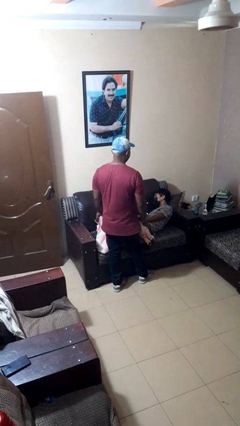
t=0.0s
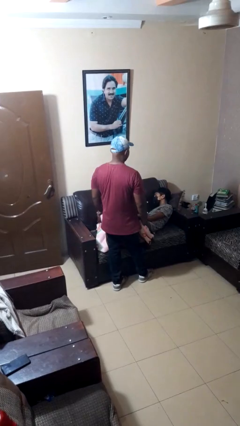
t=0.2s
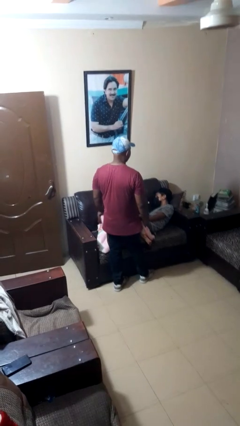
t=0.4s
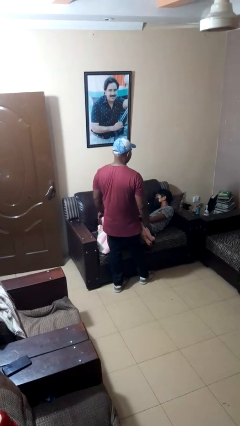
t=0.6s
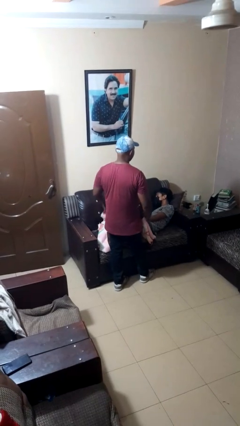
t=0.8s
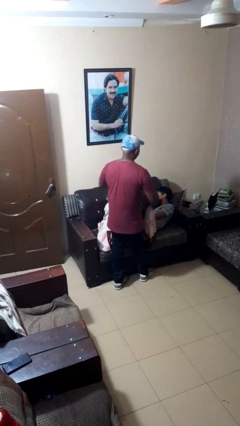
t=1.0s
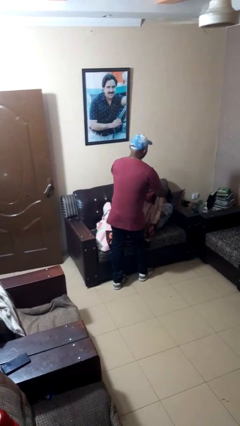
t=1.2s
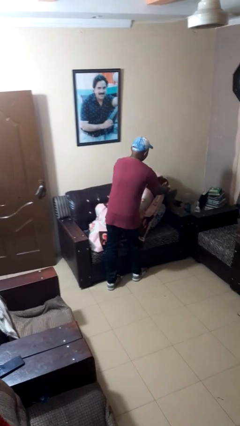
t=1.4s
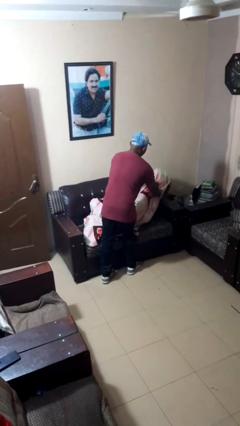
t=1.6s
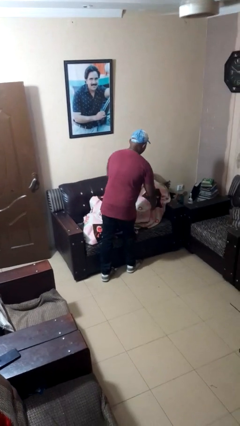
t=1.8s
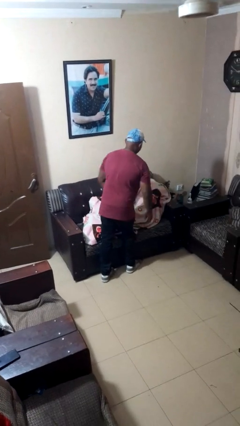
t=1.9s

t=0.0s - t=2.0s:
person covers friend with blanket

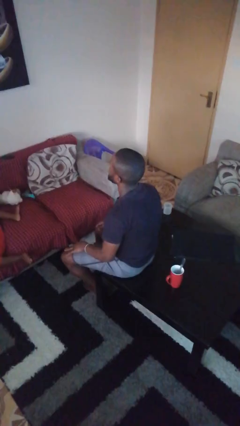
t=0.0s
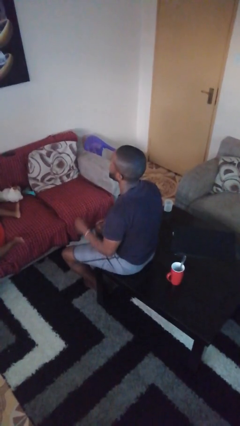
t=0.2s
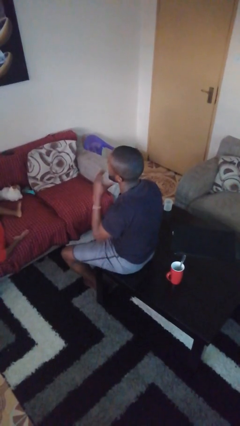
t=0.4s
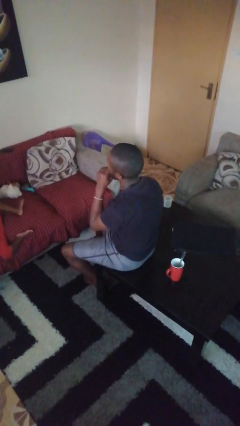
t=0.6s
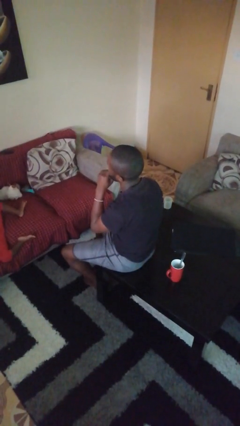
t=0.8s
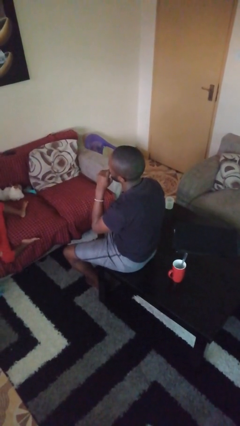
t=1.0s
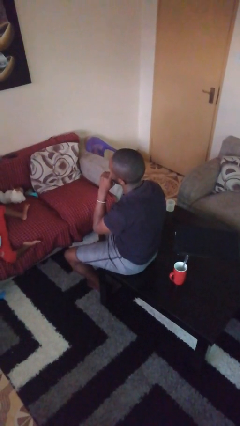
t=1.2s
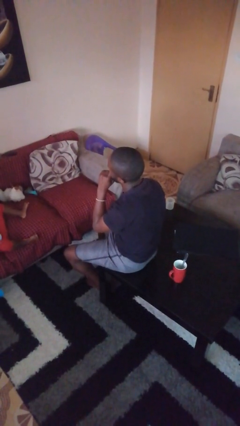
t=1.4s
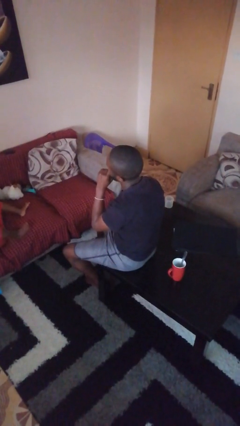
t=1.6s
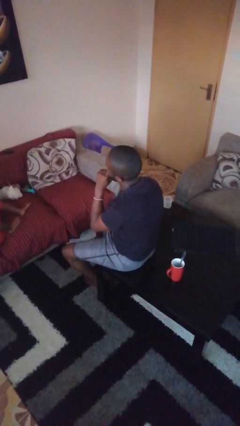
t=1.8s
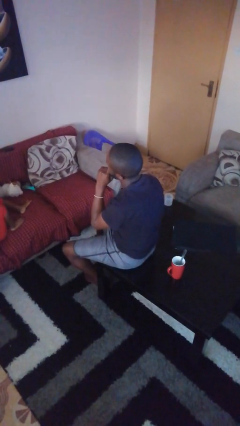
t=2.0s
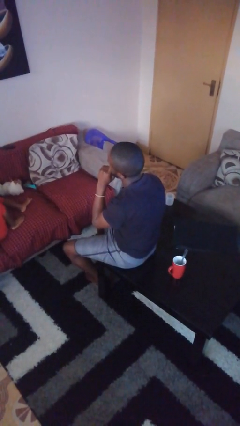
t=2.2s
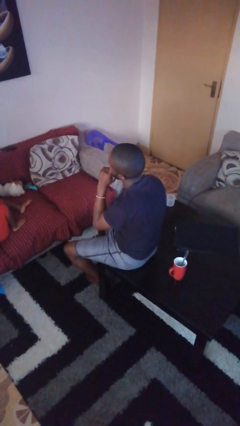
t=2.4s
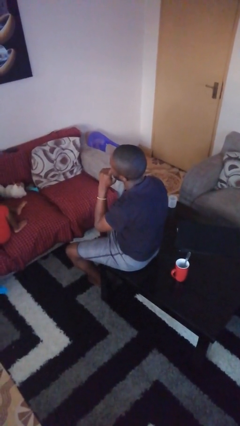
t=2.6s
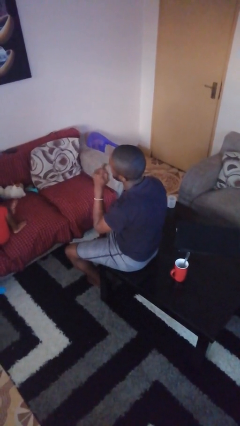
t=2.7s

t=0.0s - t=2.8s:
person strokes chin

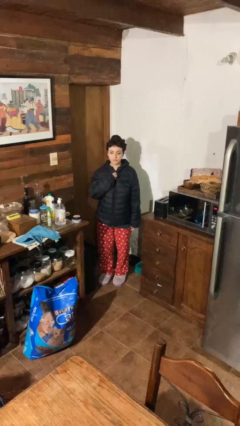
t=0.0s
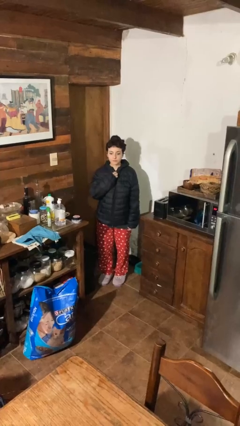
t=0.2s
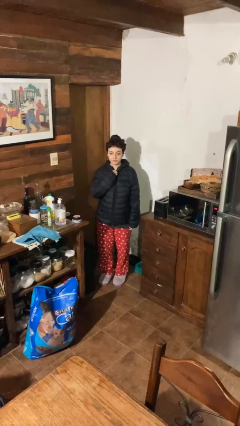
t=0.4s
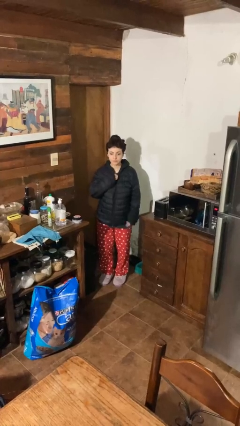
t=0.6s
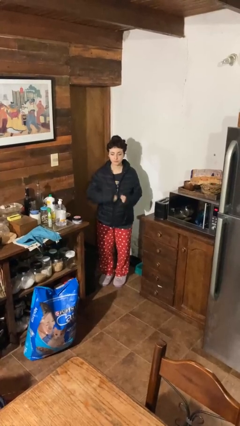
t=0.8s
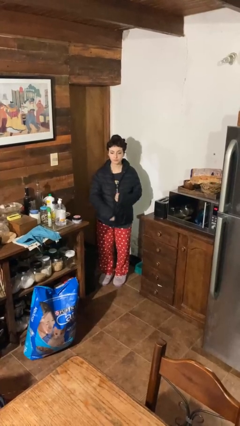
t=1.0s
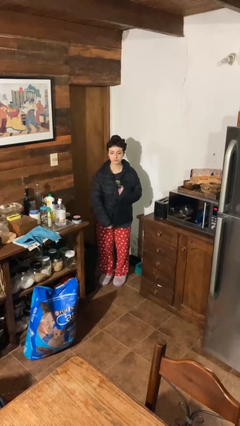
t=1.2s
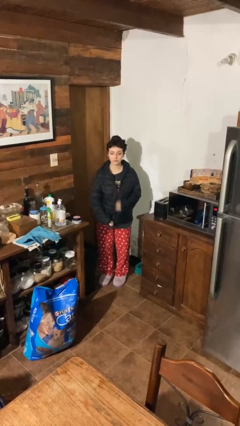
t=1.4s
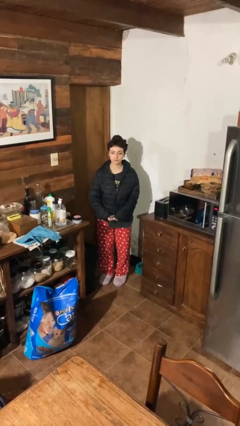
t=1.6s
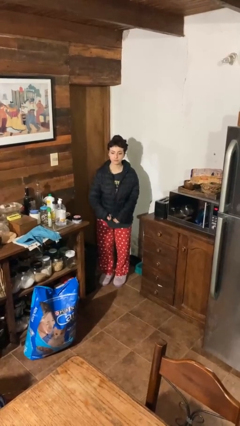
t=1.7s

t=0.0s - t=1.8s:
person unzips jacket

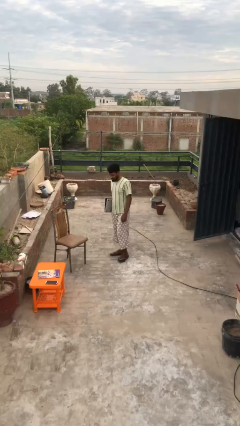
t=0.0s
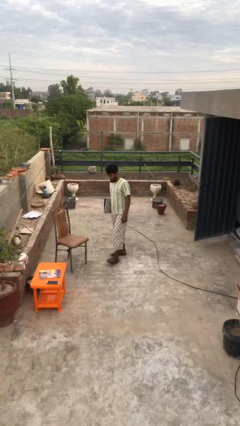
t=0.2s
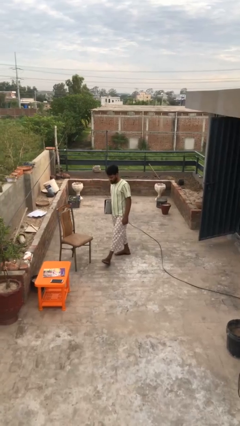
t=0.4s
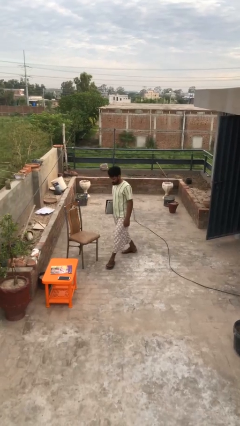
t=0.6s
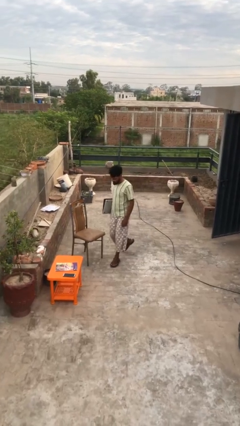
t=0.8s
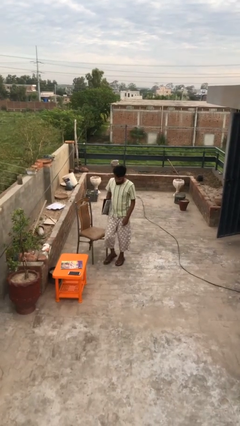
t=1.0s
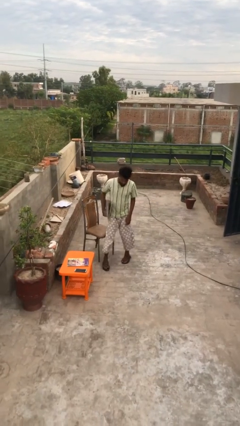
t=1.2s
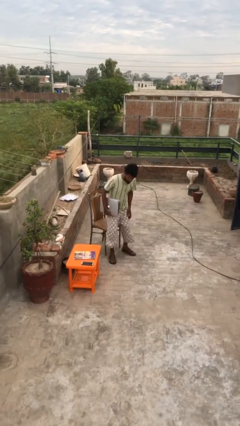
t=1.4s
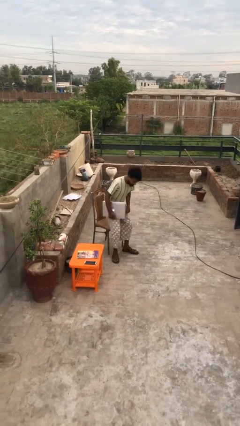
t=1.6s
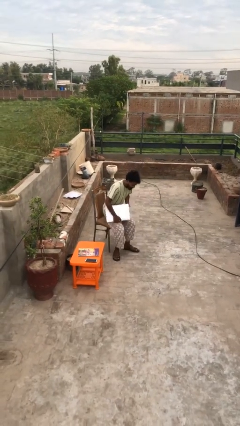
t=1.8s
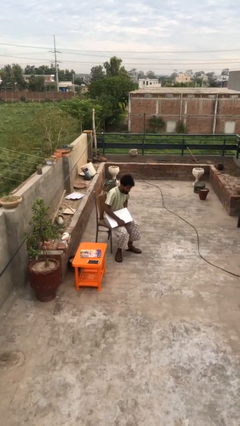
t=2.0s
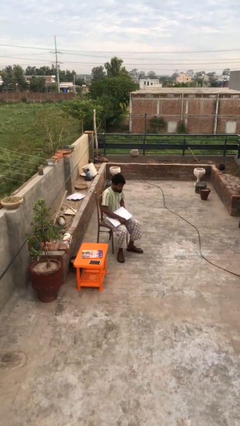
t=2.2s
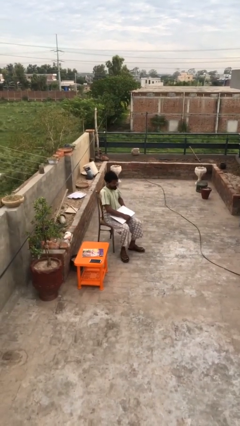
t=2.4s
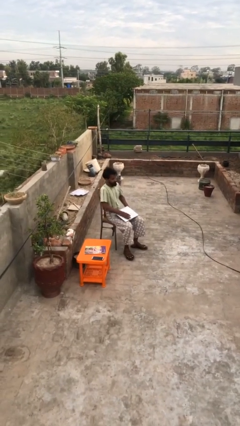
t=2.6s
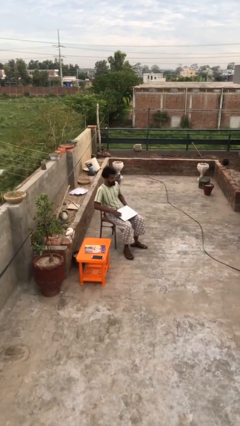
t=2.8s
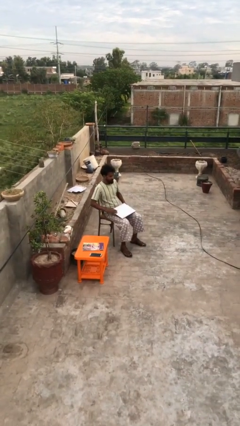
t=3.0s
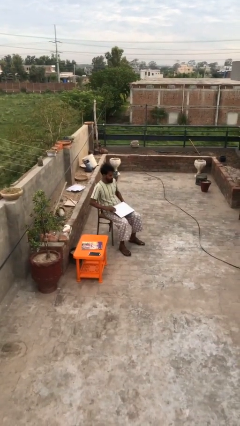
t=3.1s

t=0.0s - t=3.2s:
person sits down

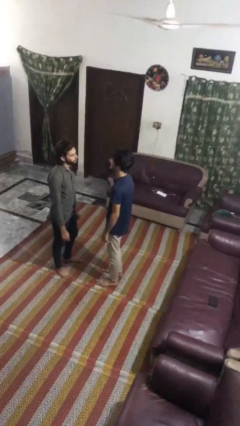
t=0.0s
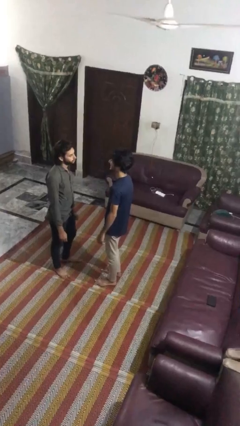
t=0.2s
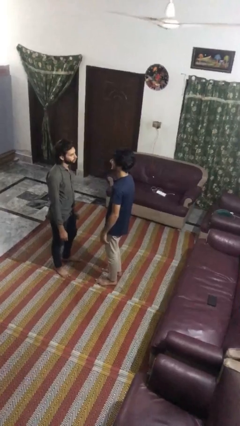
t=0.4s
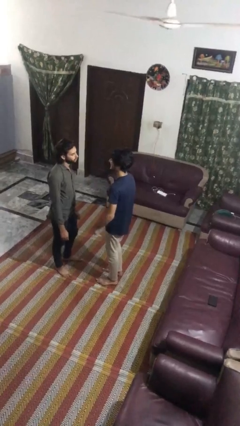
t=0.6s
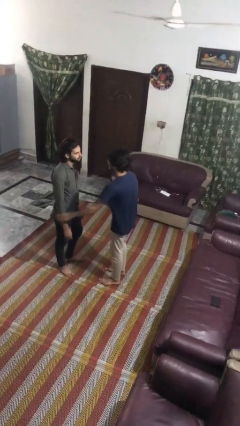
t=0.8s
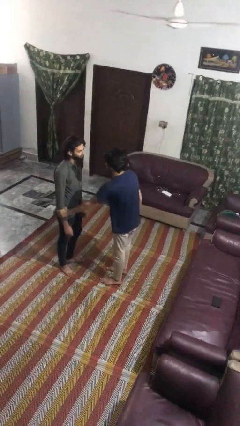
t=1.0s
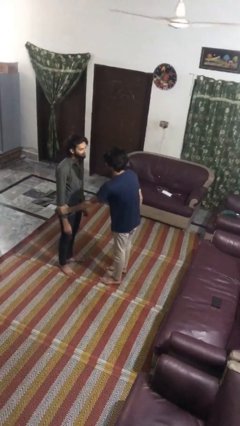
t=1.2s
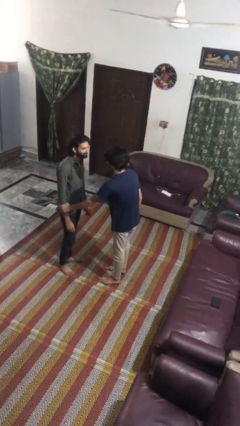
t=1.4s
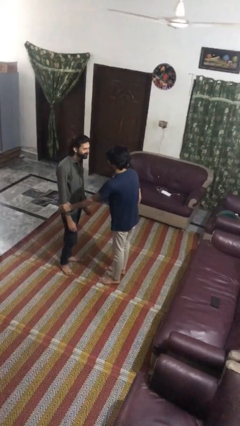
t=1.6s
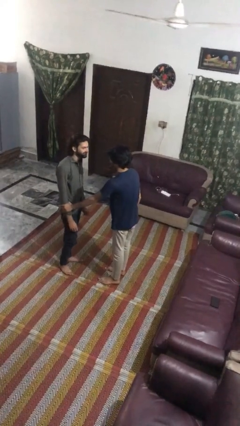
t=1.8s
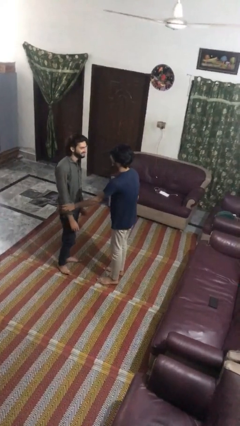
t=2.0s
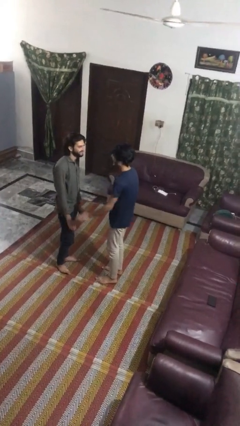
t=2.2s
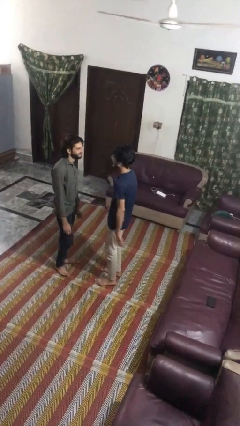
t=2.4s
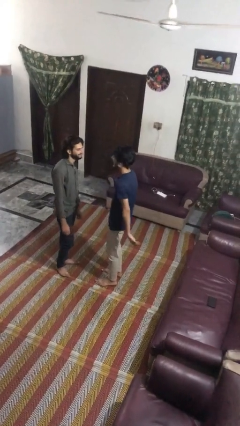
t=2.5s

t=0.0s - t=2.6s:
person grabs person by forearm

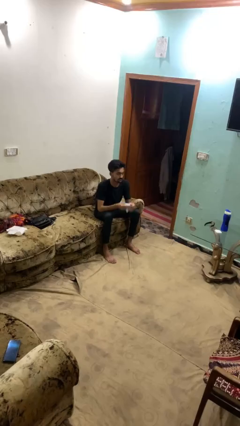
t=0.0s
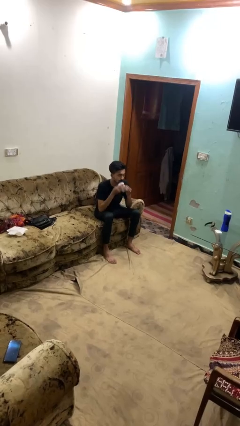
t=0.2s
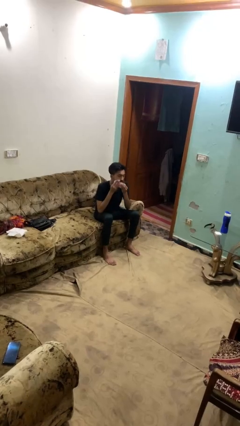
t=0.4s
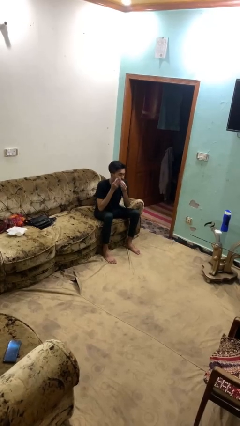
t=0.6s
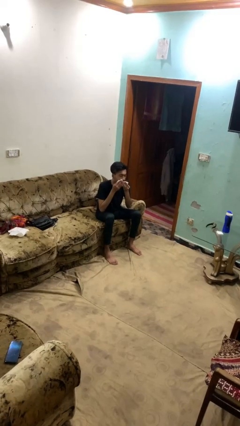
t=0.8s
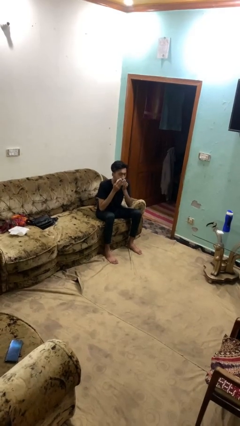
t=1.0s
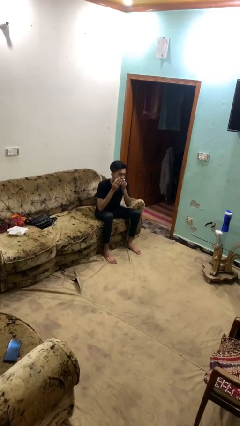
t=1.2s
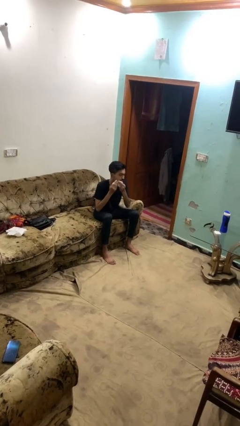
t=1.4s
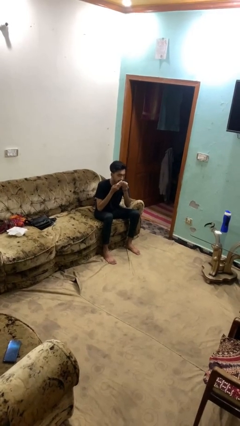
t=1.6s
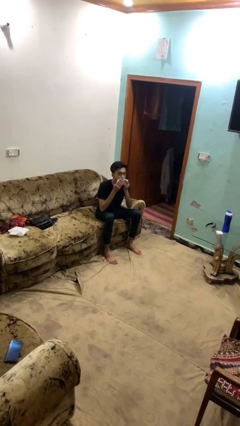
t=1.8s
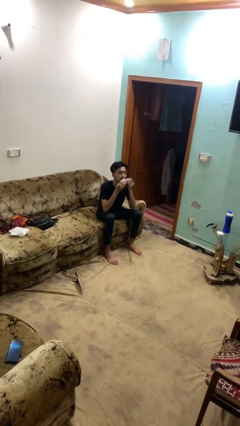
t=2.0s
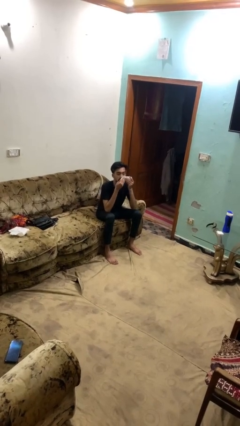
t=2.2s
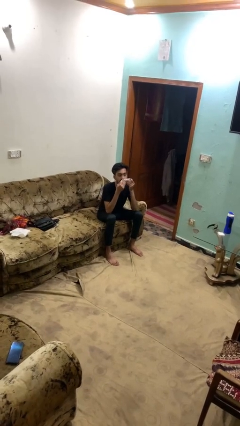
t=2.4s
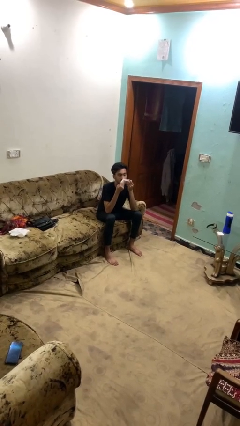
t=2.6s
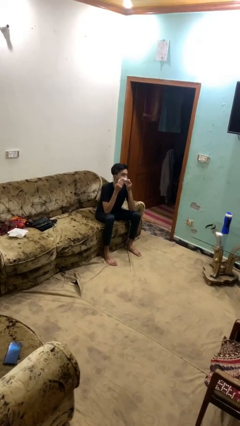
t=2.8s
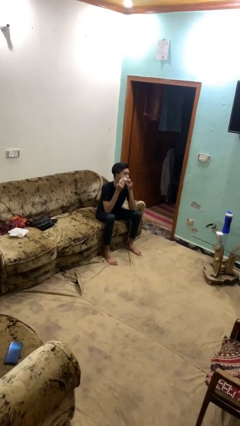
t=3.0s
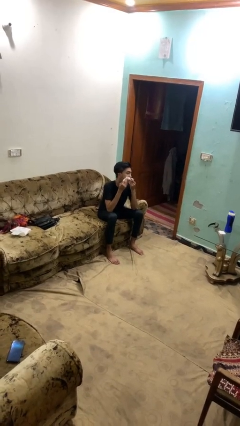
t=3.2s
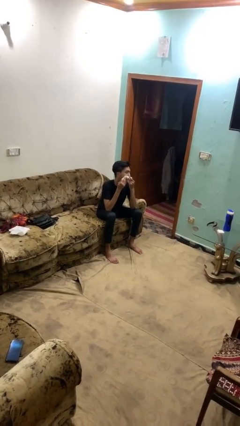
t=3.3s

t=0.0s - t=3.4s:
person wipes mouth with napkin

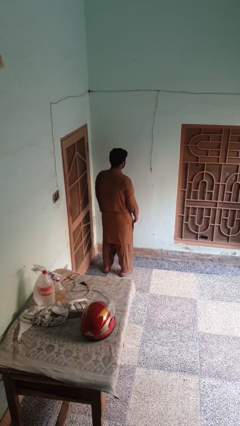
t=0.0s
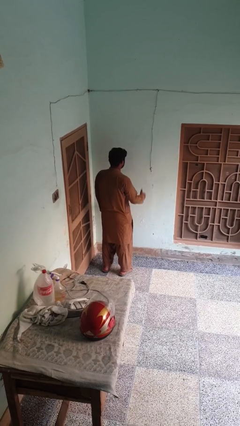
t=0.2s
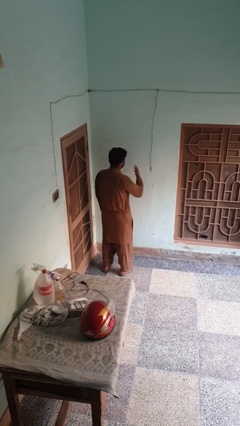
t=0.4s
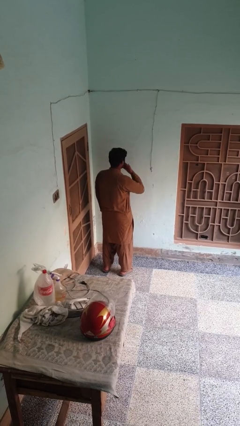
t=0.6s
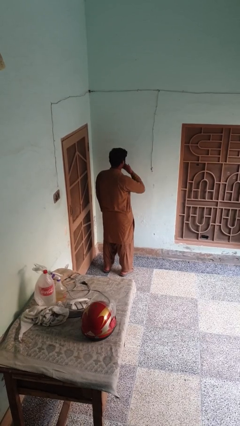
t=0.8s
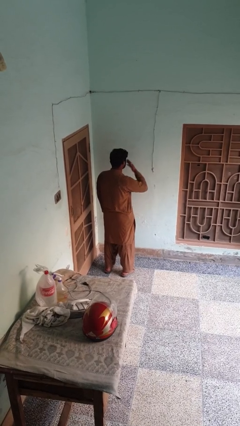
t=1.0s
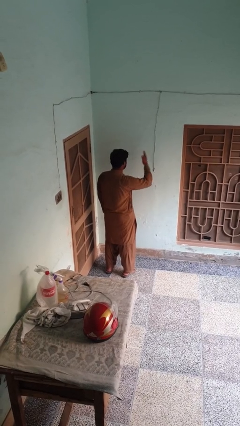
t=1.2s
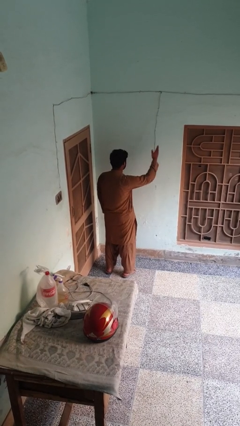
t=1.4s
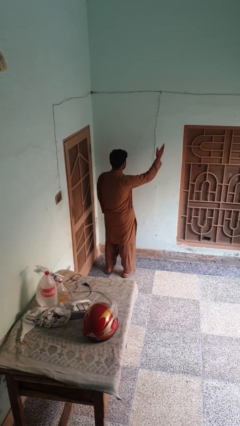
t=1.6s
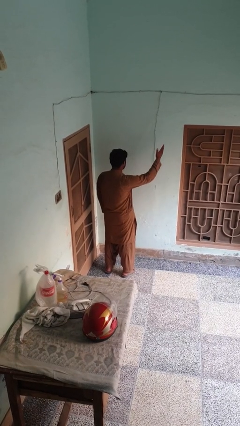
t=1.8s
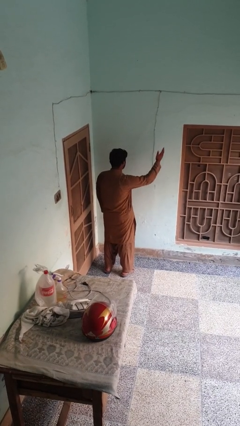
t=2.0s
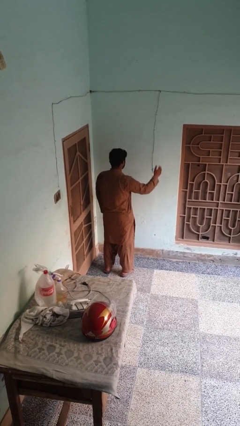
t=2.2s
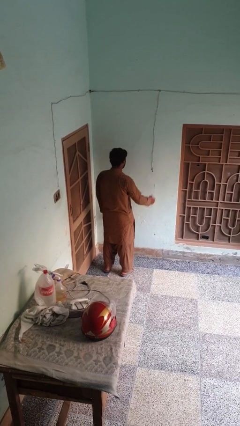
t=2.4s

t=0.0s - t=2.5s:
person gestures blow kiss
